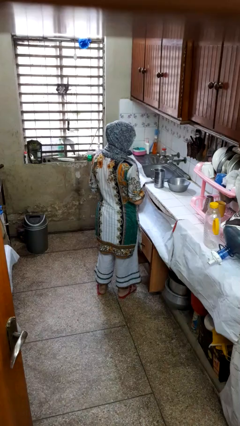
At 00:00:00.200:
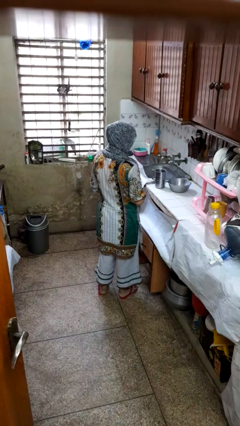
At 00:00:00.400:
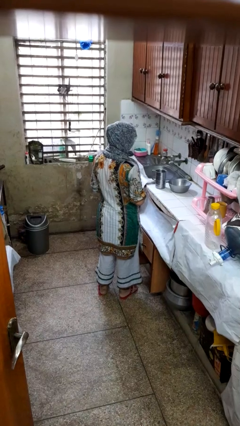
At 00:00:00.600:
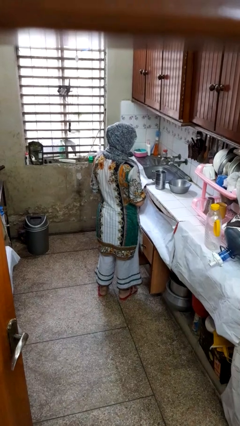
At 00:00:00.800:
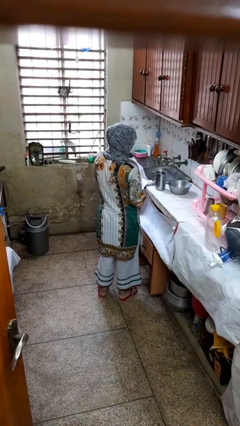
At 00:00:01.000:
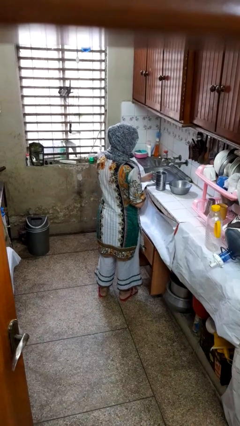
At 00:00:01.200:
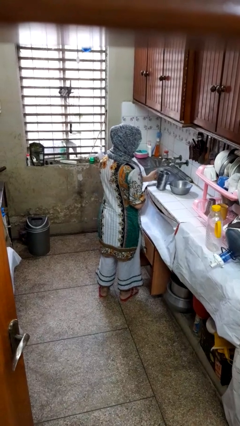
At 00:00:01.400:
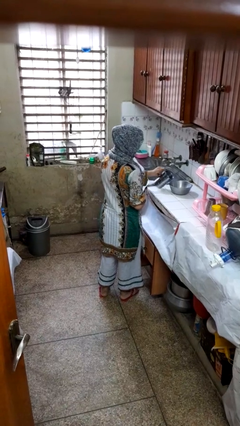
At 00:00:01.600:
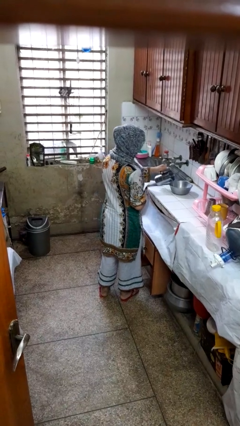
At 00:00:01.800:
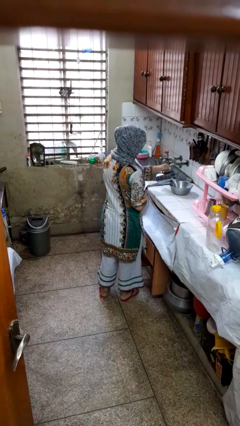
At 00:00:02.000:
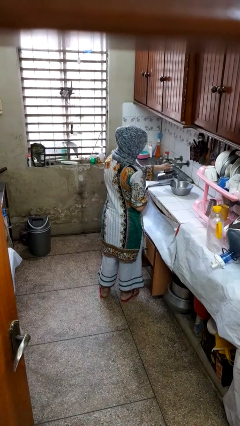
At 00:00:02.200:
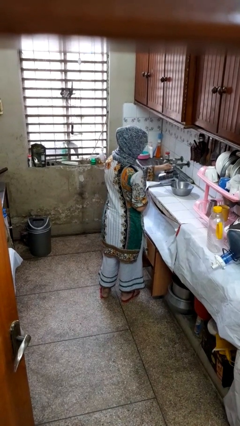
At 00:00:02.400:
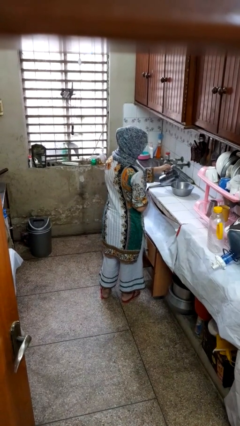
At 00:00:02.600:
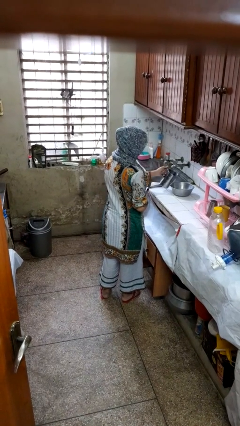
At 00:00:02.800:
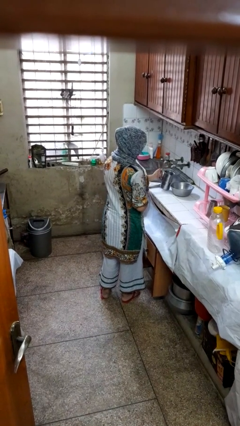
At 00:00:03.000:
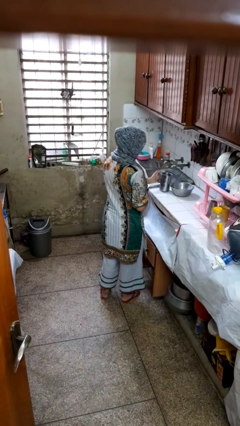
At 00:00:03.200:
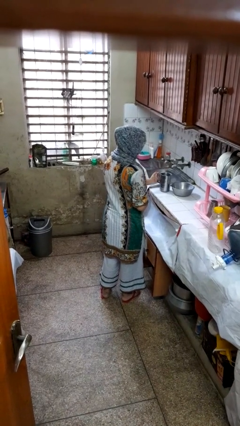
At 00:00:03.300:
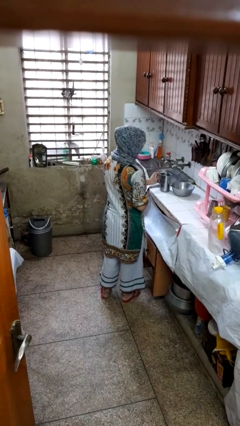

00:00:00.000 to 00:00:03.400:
person pours into bowl

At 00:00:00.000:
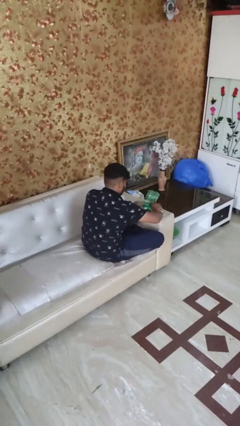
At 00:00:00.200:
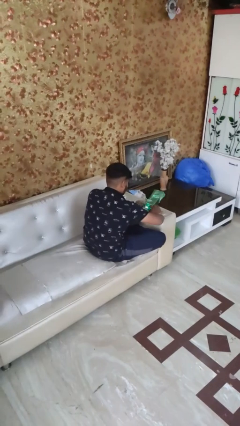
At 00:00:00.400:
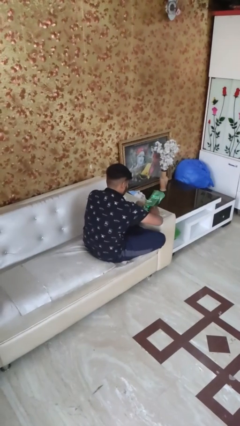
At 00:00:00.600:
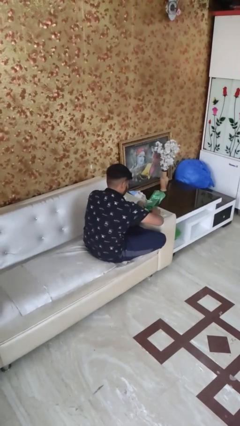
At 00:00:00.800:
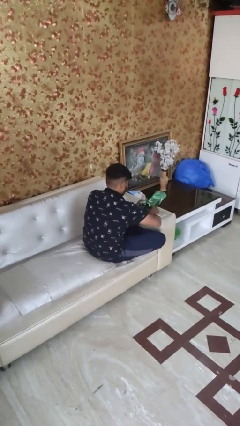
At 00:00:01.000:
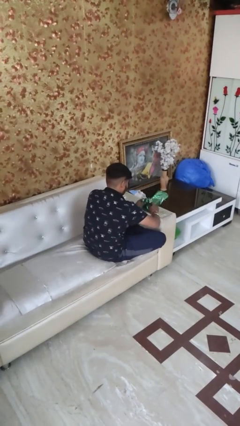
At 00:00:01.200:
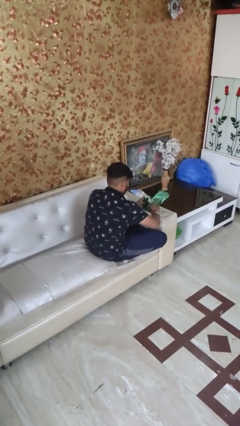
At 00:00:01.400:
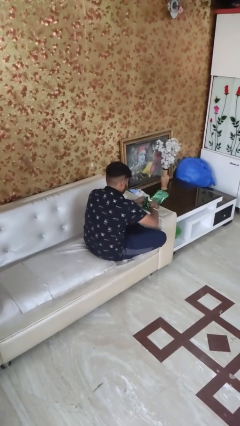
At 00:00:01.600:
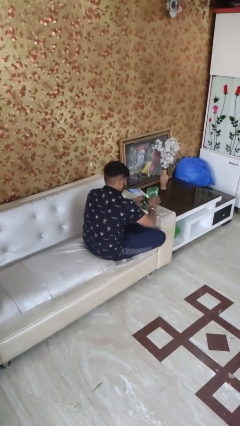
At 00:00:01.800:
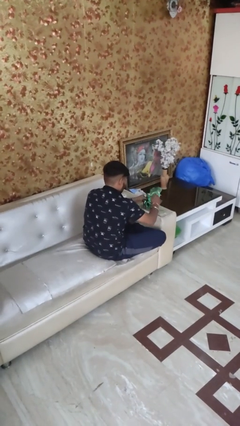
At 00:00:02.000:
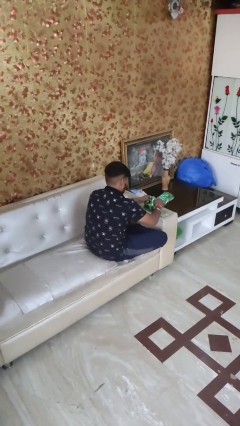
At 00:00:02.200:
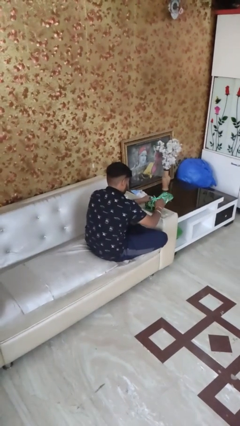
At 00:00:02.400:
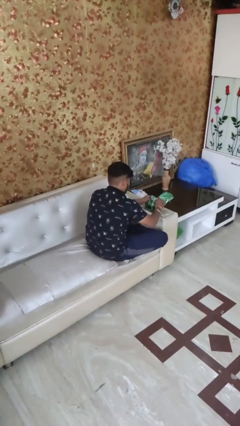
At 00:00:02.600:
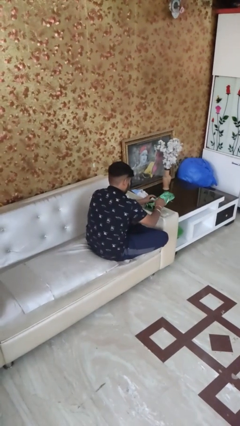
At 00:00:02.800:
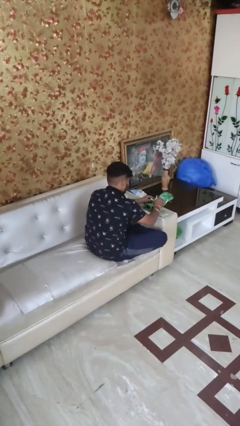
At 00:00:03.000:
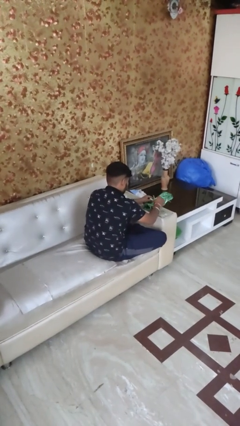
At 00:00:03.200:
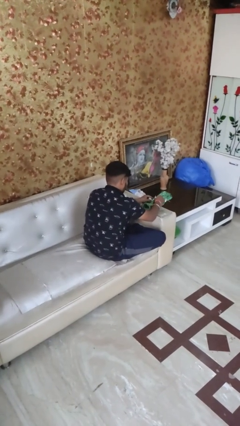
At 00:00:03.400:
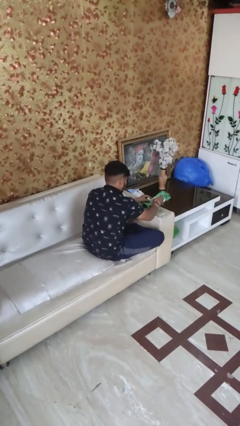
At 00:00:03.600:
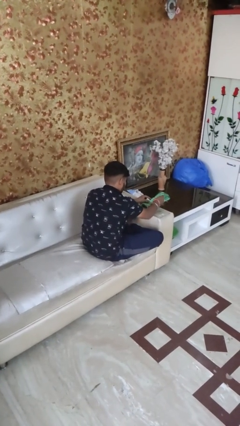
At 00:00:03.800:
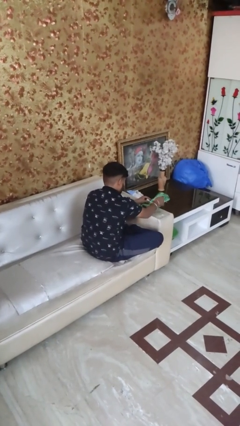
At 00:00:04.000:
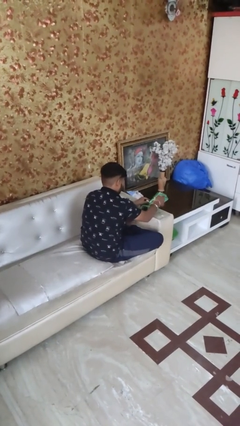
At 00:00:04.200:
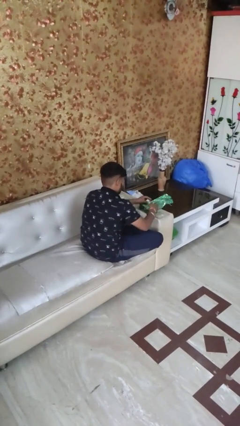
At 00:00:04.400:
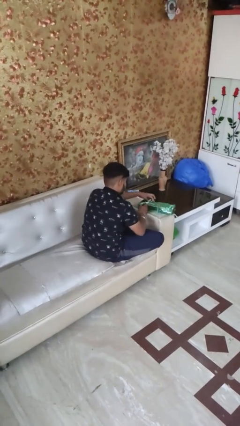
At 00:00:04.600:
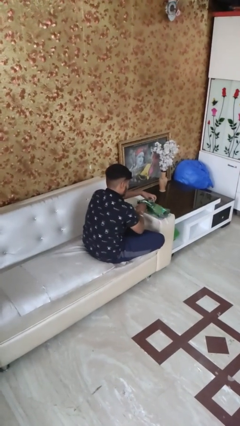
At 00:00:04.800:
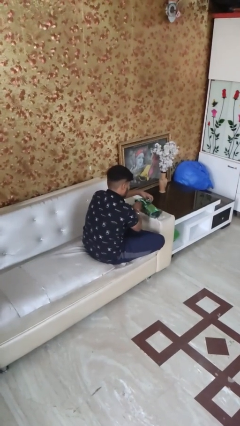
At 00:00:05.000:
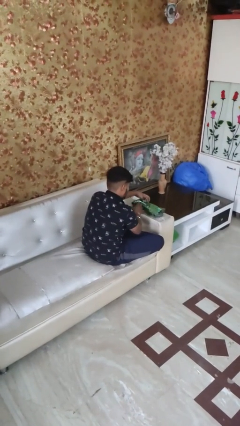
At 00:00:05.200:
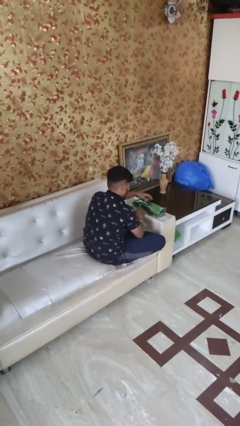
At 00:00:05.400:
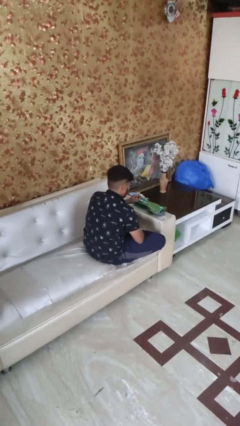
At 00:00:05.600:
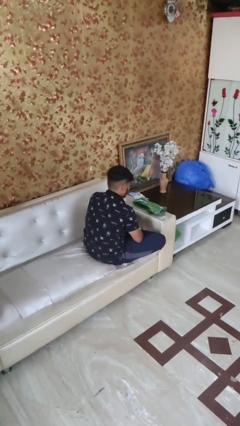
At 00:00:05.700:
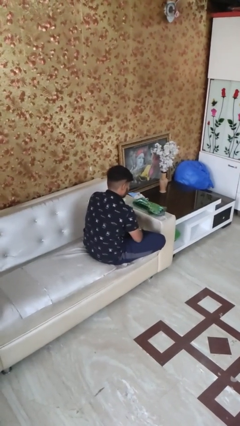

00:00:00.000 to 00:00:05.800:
person wraps box

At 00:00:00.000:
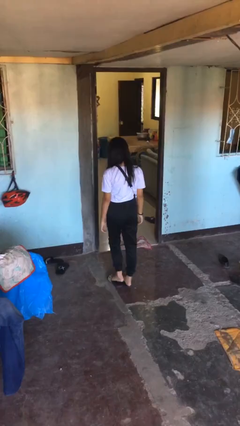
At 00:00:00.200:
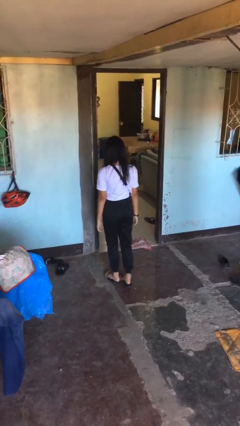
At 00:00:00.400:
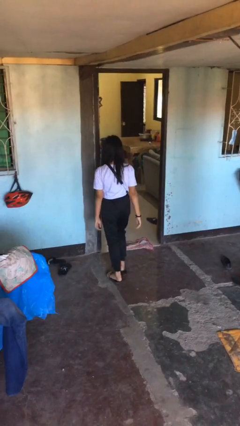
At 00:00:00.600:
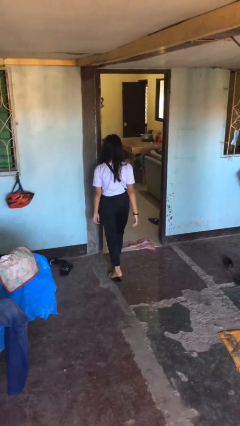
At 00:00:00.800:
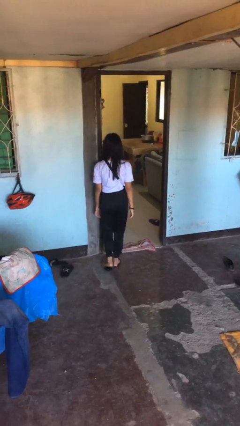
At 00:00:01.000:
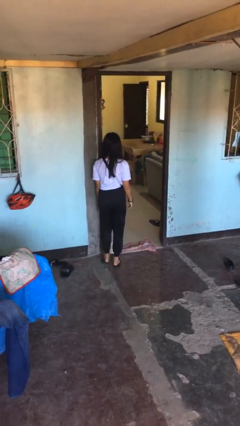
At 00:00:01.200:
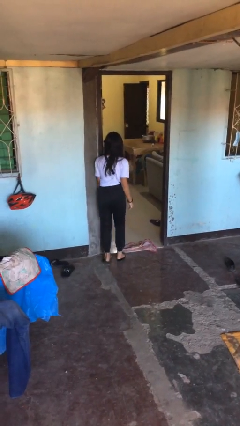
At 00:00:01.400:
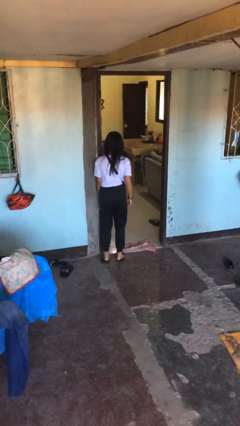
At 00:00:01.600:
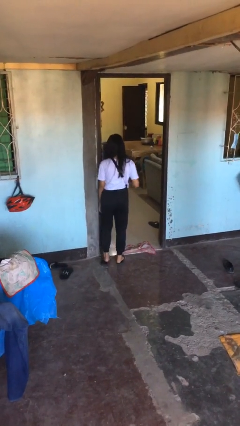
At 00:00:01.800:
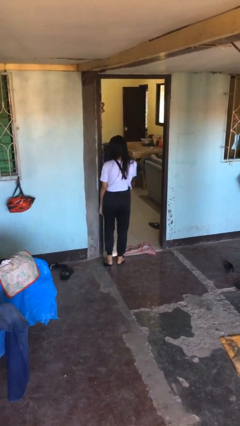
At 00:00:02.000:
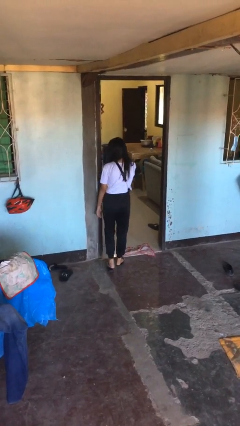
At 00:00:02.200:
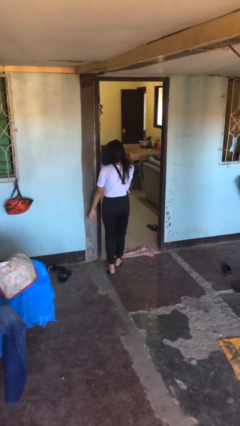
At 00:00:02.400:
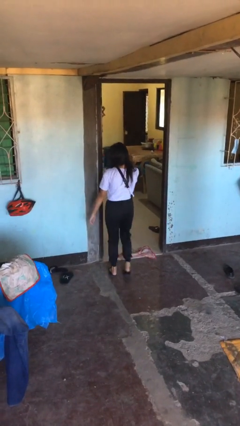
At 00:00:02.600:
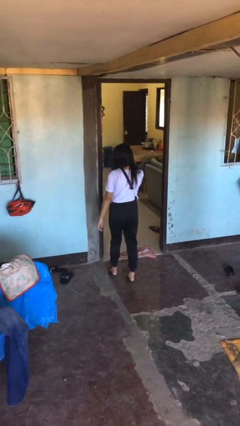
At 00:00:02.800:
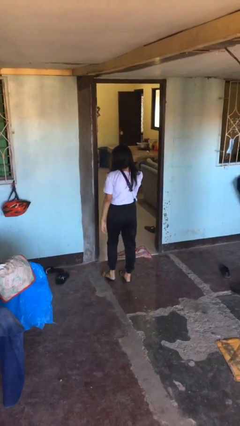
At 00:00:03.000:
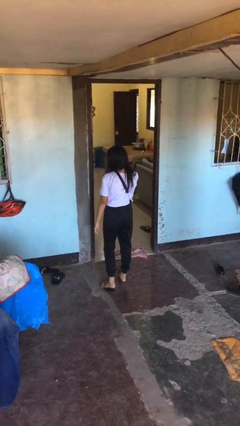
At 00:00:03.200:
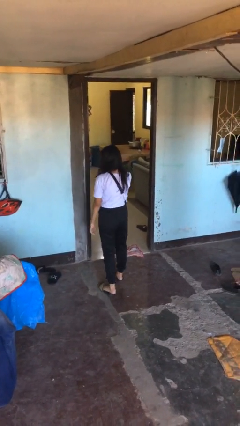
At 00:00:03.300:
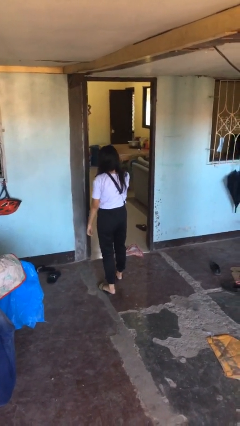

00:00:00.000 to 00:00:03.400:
person bumps into wall

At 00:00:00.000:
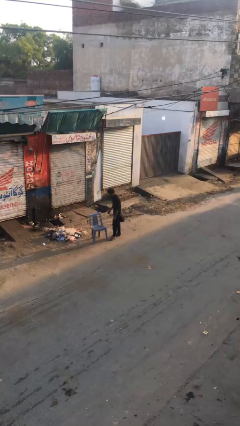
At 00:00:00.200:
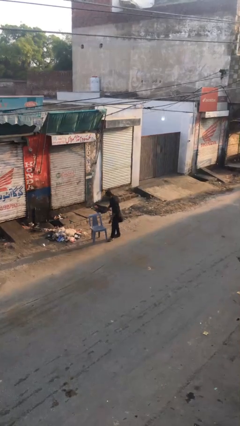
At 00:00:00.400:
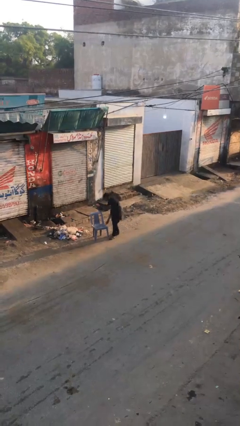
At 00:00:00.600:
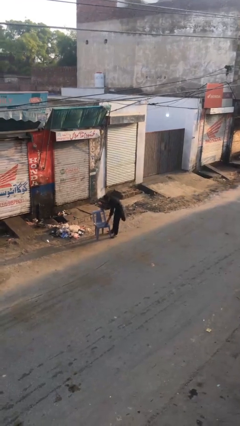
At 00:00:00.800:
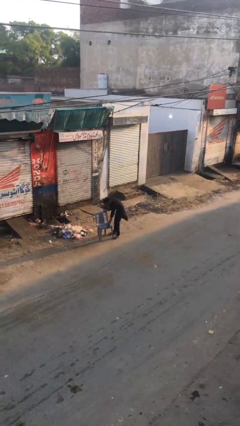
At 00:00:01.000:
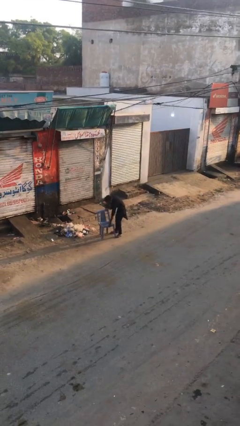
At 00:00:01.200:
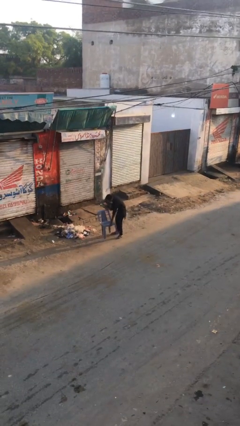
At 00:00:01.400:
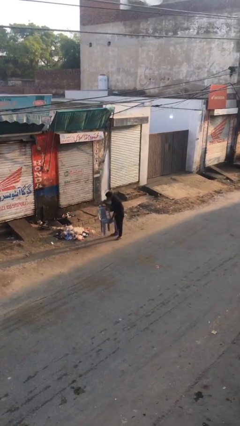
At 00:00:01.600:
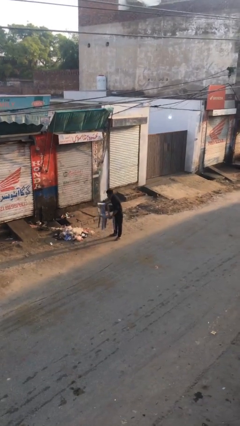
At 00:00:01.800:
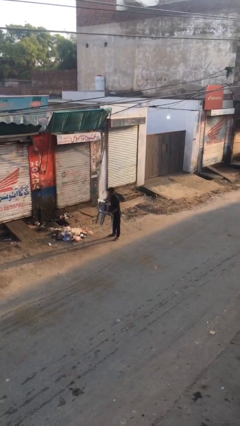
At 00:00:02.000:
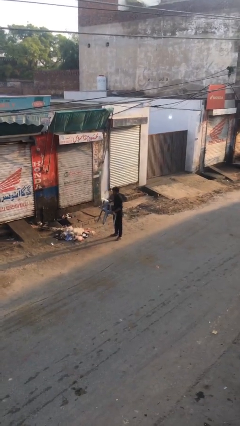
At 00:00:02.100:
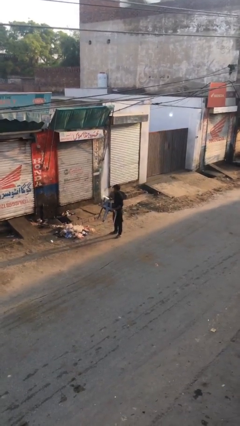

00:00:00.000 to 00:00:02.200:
person picks up object from floor

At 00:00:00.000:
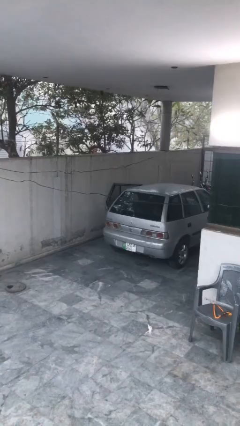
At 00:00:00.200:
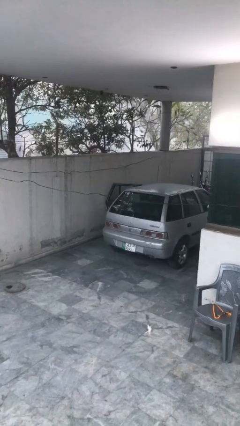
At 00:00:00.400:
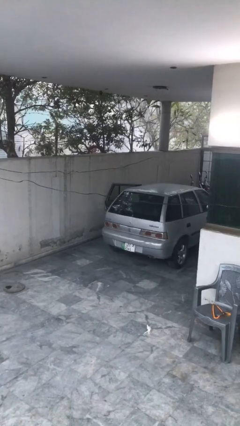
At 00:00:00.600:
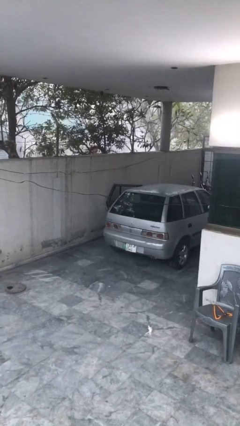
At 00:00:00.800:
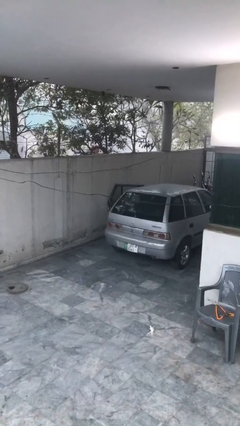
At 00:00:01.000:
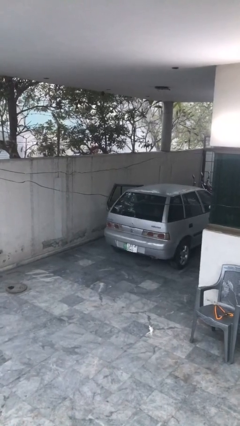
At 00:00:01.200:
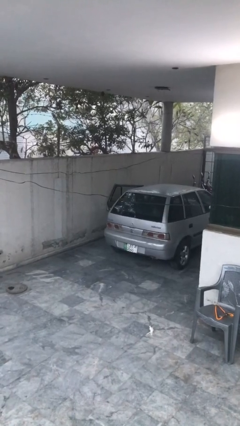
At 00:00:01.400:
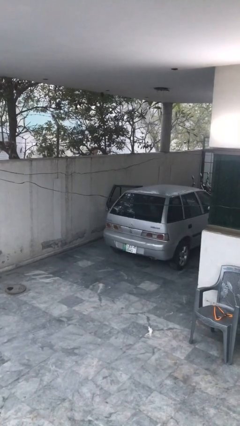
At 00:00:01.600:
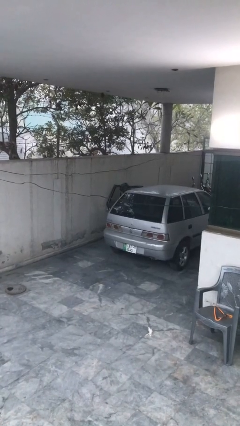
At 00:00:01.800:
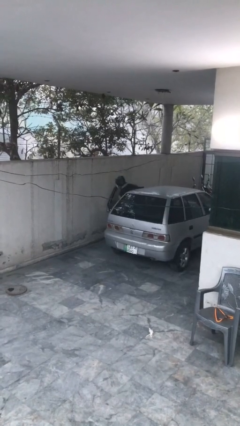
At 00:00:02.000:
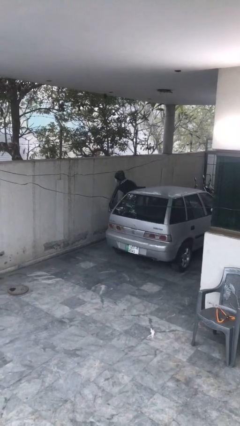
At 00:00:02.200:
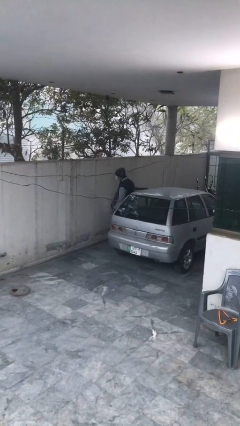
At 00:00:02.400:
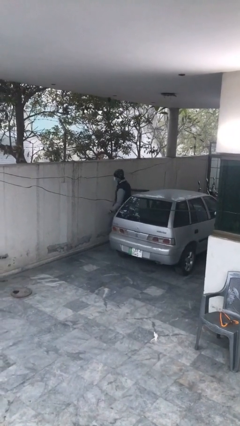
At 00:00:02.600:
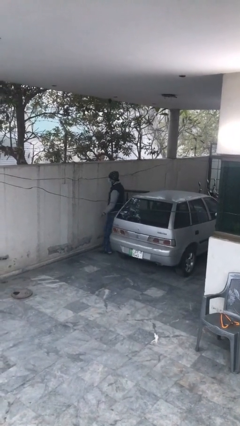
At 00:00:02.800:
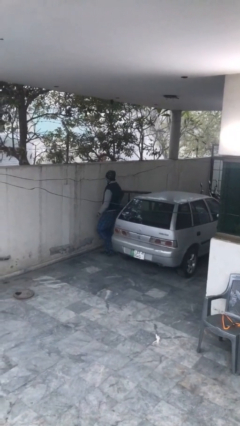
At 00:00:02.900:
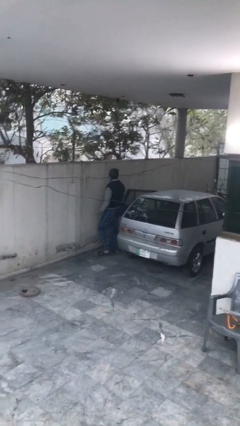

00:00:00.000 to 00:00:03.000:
person exits car
